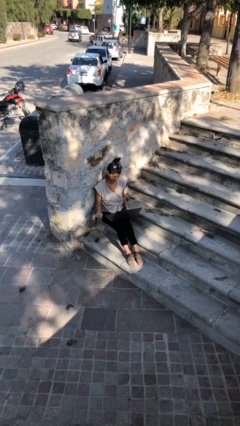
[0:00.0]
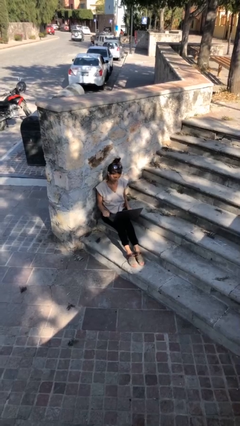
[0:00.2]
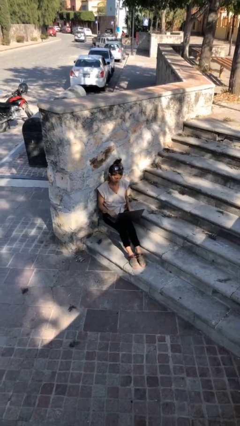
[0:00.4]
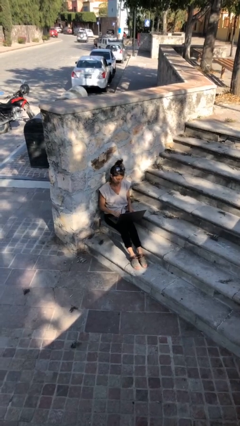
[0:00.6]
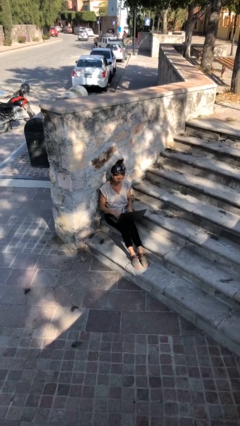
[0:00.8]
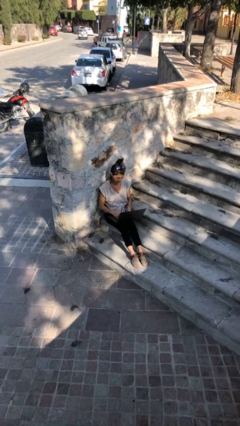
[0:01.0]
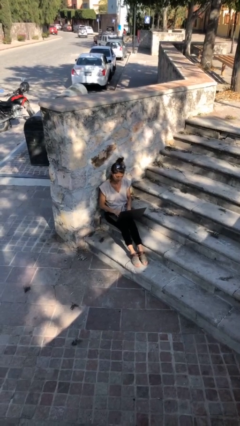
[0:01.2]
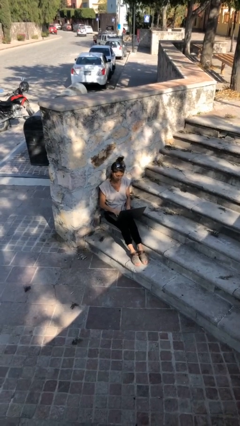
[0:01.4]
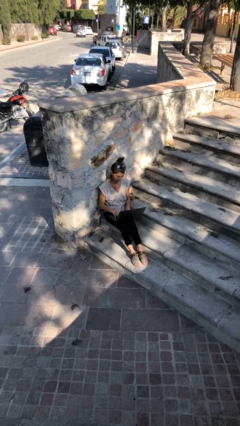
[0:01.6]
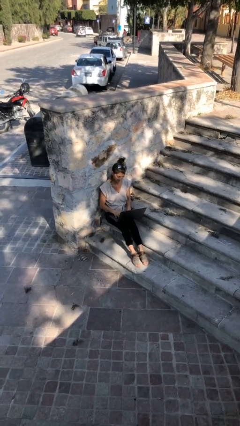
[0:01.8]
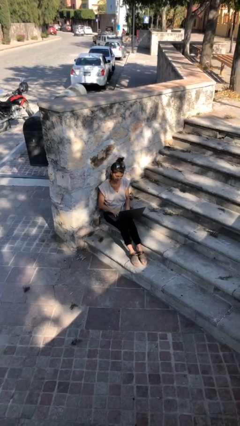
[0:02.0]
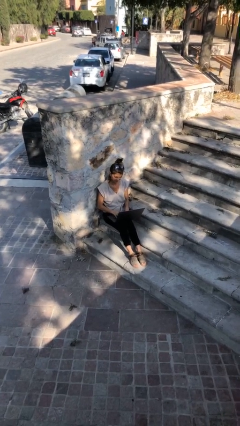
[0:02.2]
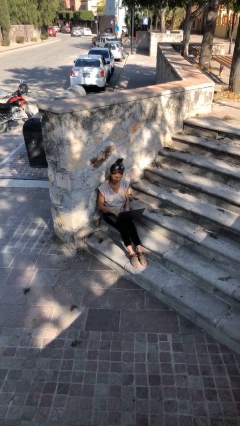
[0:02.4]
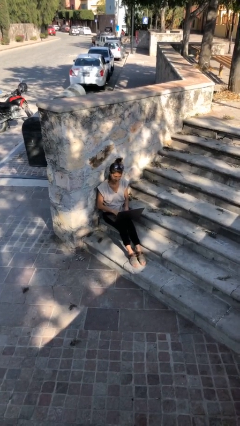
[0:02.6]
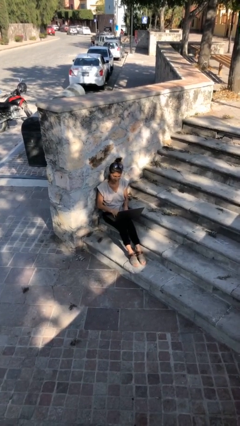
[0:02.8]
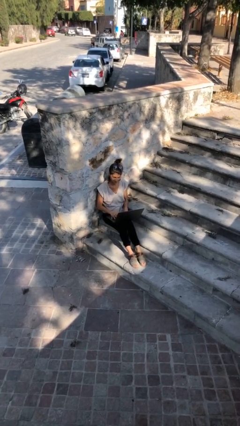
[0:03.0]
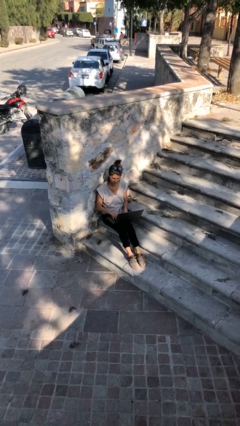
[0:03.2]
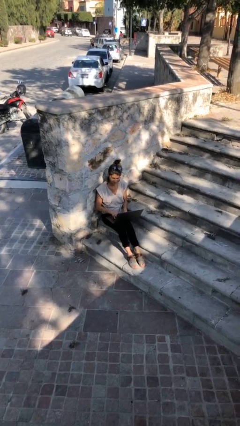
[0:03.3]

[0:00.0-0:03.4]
person interacts with laptop

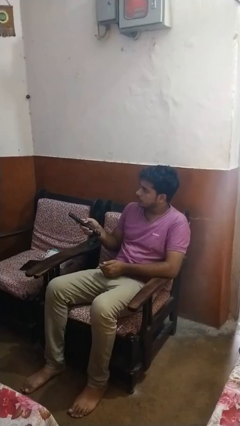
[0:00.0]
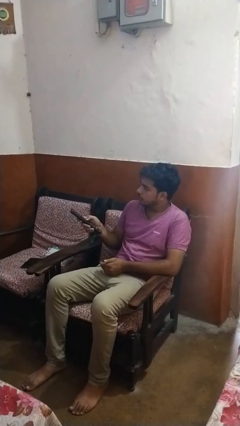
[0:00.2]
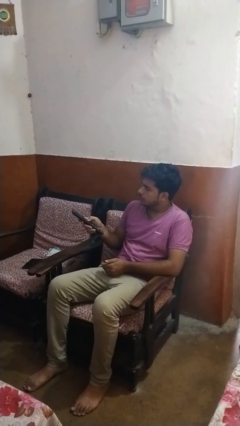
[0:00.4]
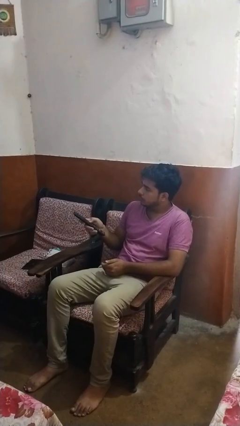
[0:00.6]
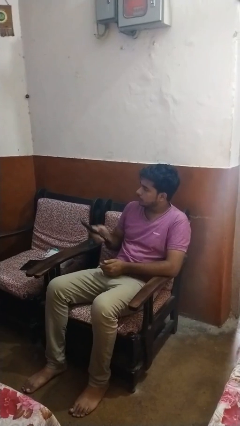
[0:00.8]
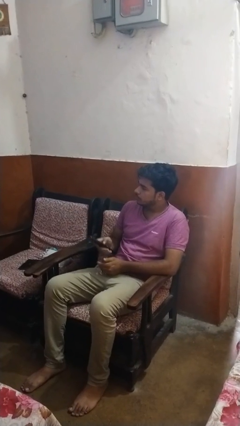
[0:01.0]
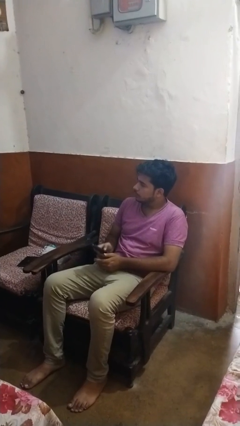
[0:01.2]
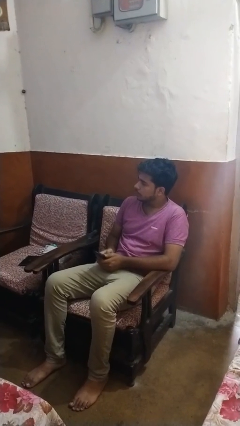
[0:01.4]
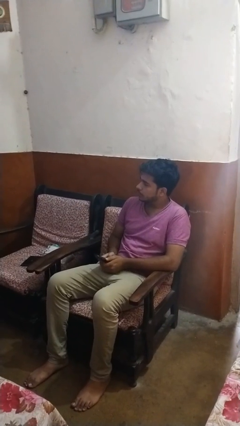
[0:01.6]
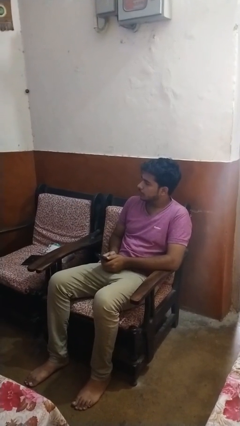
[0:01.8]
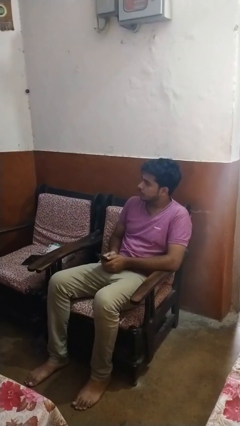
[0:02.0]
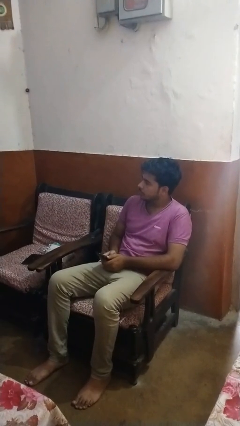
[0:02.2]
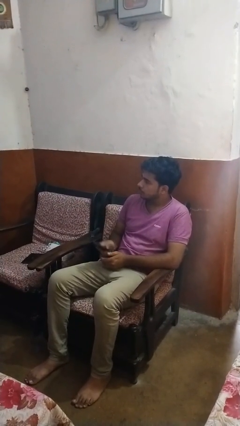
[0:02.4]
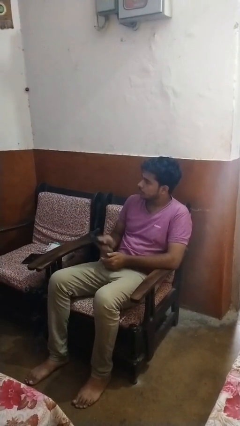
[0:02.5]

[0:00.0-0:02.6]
person uses television remote

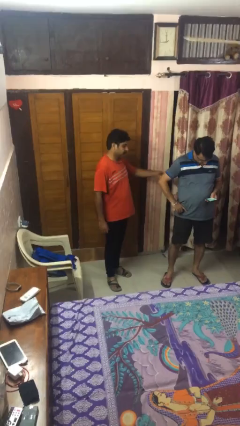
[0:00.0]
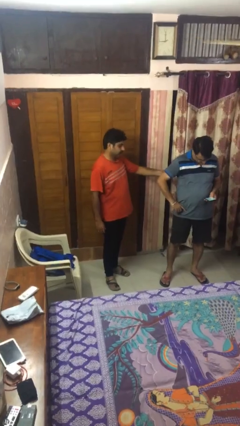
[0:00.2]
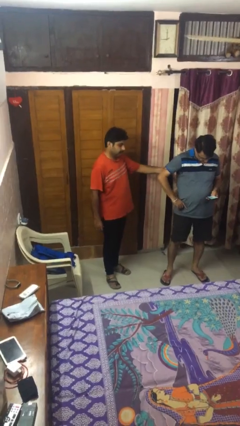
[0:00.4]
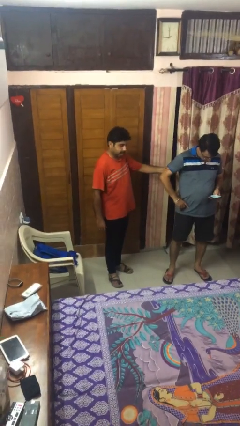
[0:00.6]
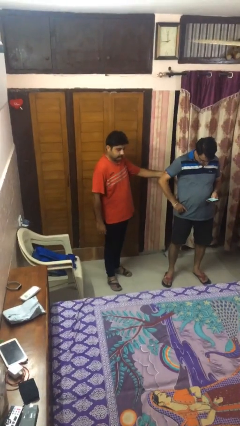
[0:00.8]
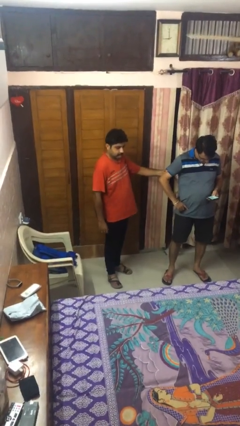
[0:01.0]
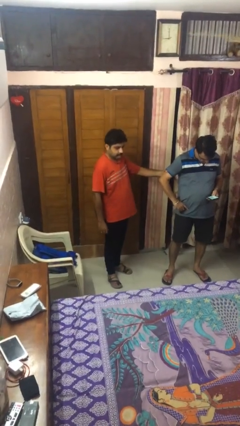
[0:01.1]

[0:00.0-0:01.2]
person grabs person by bicep

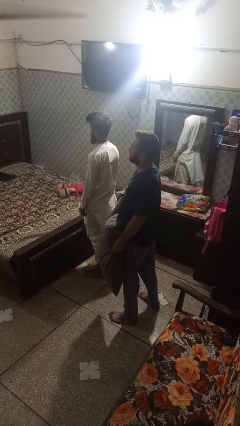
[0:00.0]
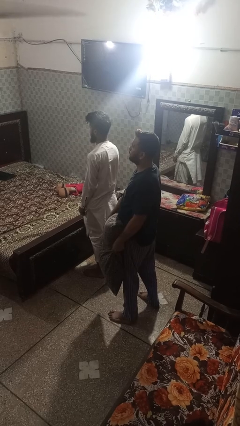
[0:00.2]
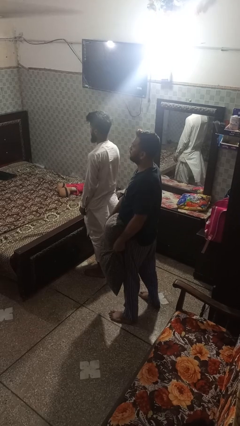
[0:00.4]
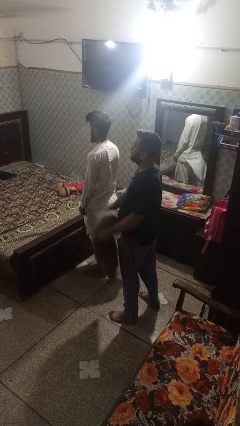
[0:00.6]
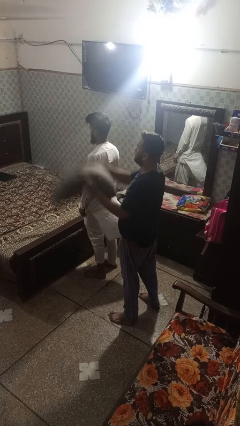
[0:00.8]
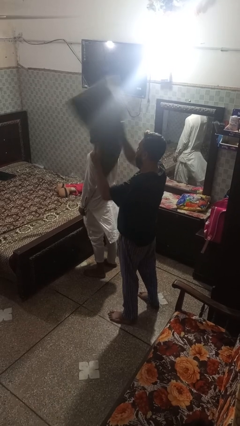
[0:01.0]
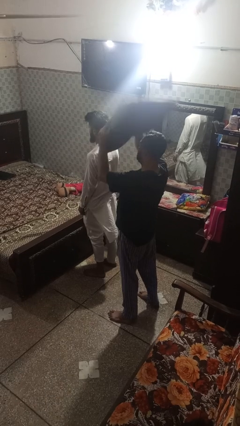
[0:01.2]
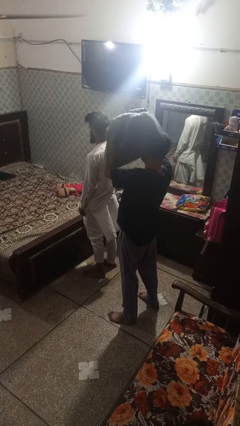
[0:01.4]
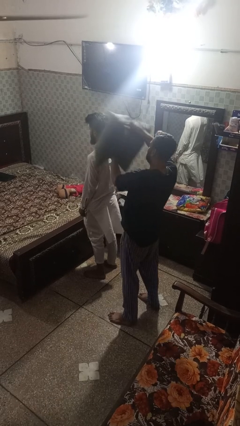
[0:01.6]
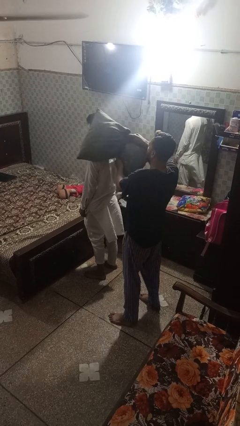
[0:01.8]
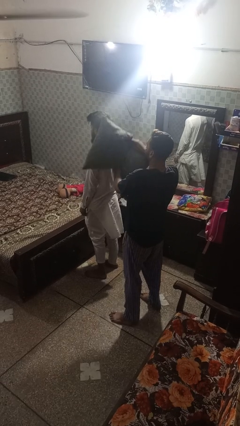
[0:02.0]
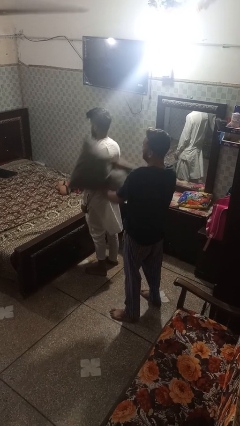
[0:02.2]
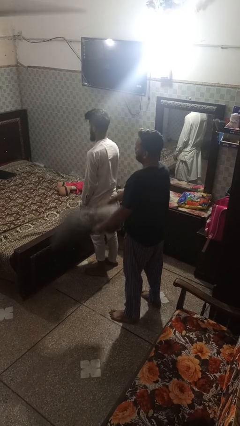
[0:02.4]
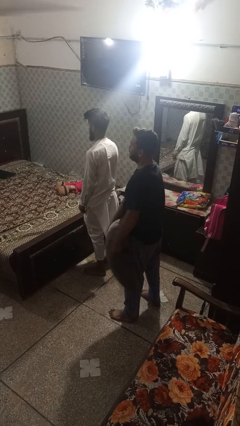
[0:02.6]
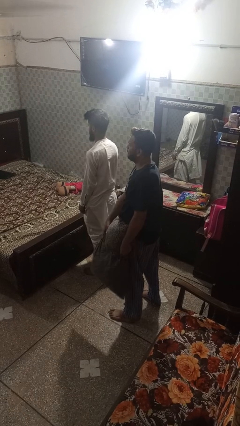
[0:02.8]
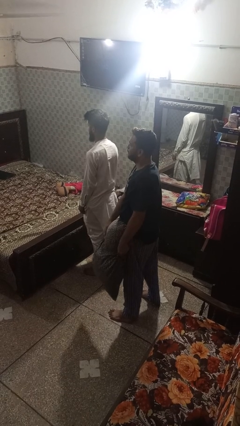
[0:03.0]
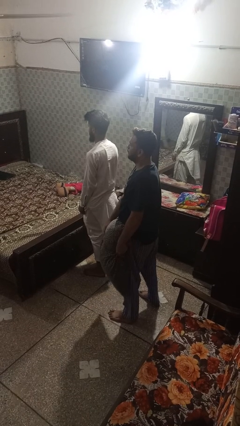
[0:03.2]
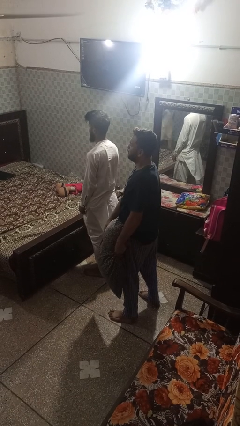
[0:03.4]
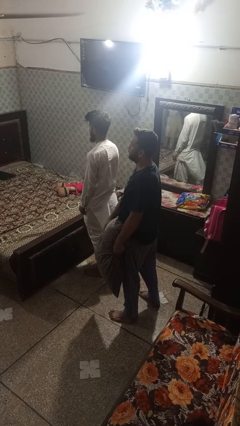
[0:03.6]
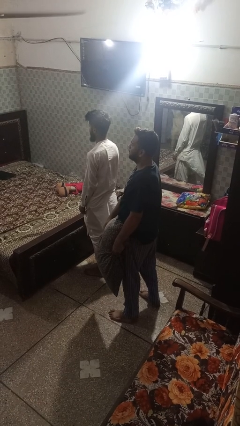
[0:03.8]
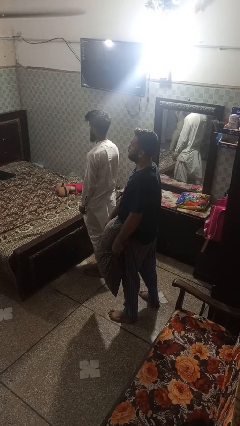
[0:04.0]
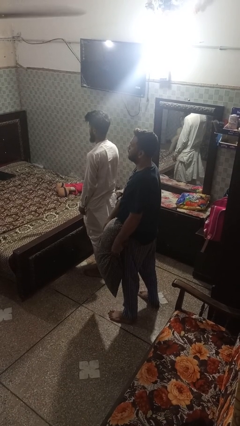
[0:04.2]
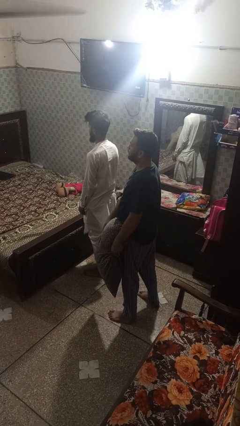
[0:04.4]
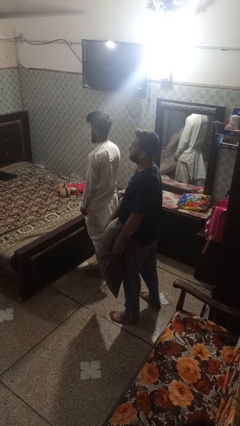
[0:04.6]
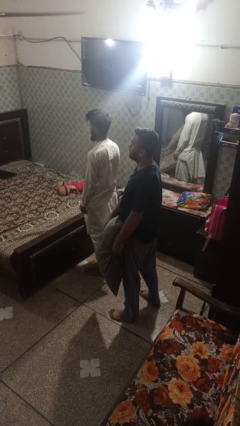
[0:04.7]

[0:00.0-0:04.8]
person hits person with pillow

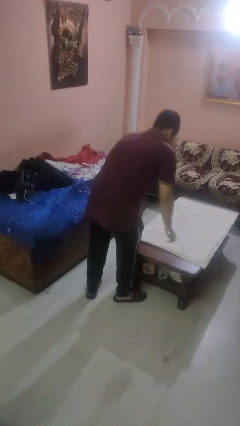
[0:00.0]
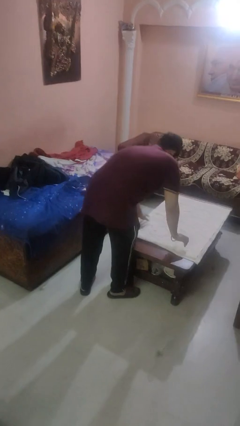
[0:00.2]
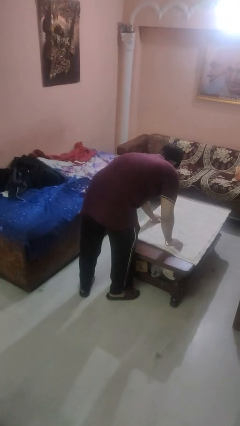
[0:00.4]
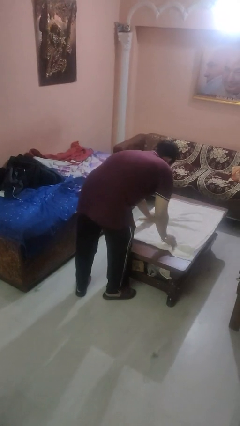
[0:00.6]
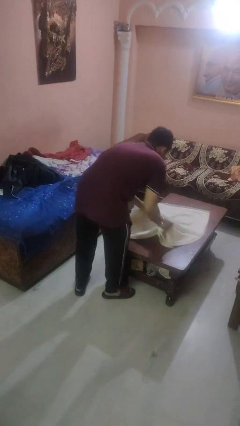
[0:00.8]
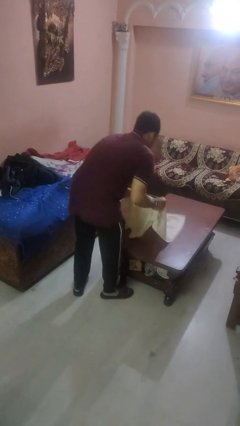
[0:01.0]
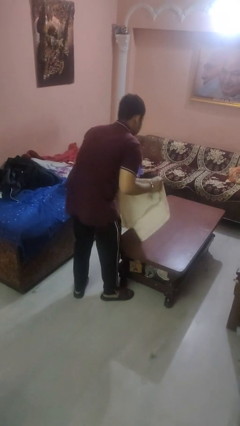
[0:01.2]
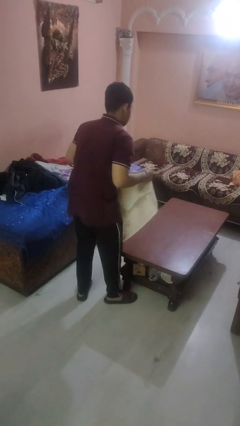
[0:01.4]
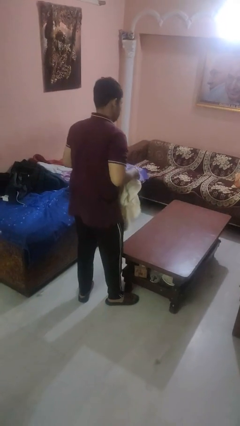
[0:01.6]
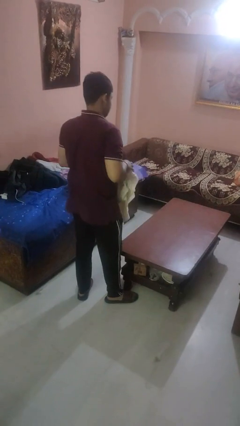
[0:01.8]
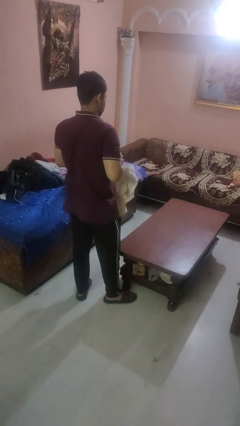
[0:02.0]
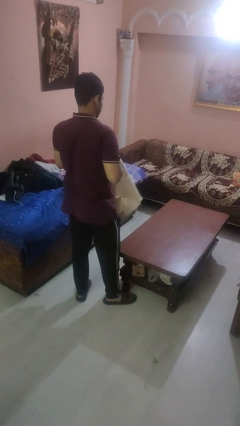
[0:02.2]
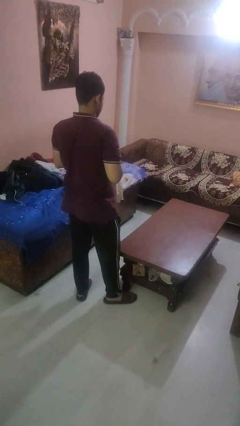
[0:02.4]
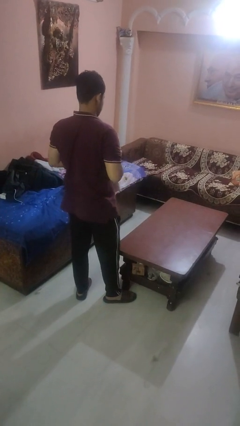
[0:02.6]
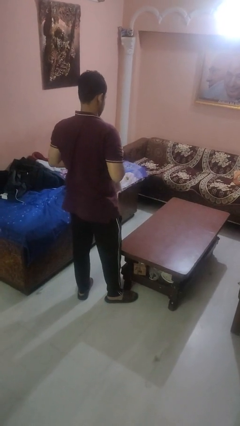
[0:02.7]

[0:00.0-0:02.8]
person folds tablecloth

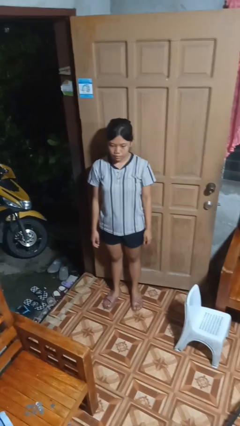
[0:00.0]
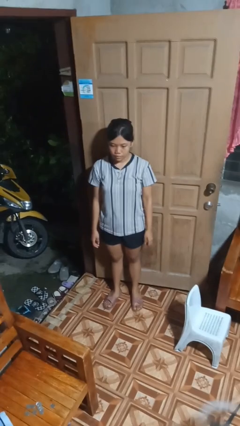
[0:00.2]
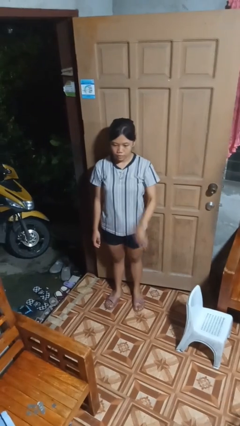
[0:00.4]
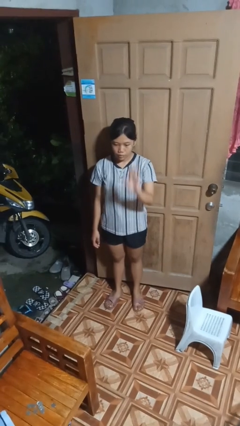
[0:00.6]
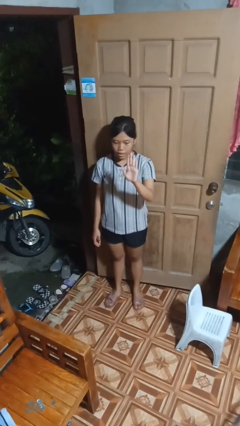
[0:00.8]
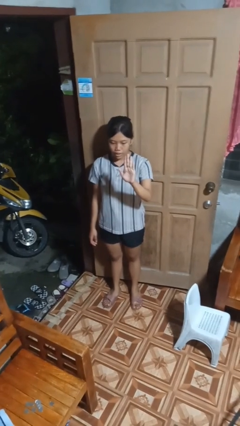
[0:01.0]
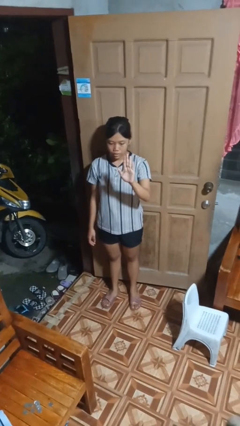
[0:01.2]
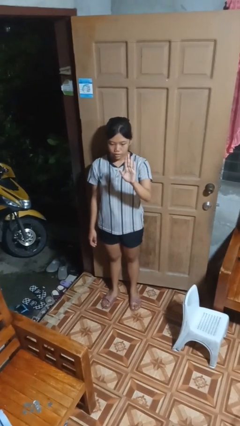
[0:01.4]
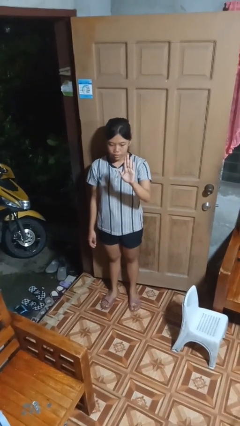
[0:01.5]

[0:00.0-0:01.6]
person gestures number five

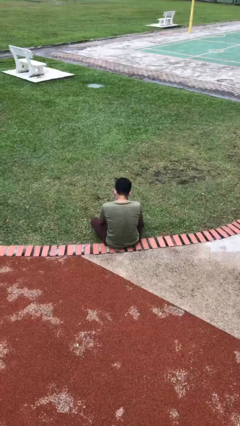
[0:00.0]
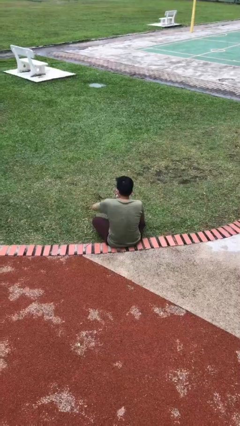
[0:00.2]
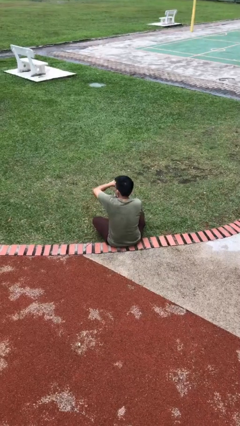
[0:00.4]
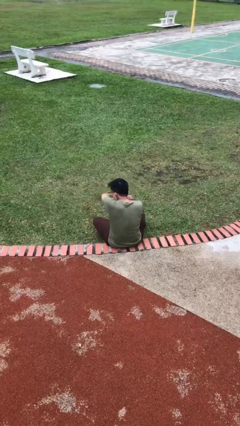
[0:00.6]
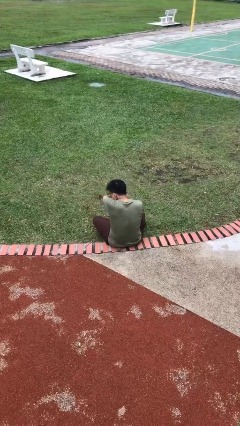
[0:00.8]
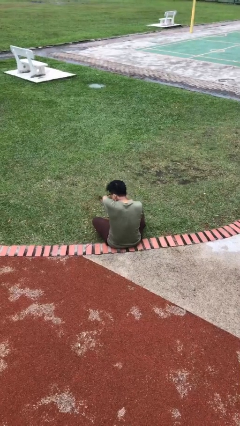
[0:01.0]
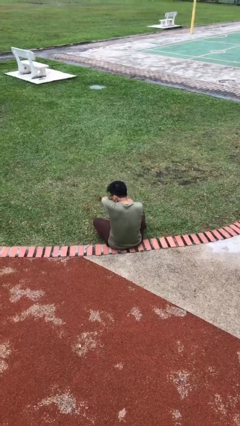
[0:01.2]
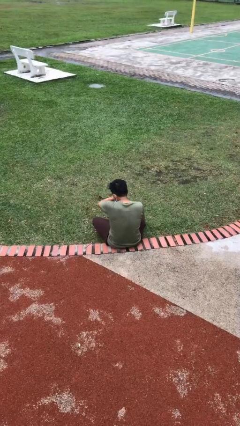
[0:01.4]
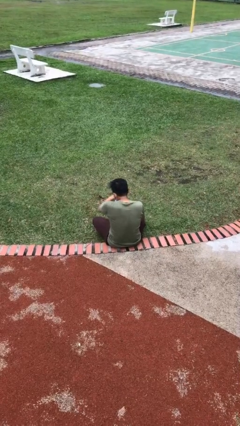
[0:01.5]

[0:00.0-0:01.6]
person sneezes into arm
